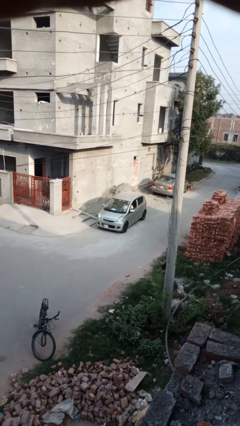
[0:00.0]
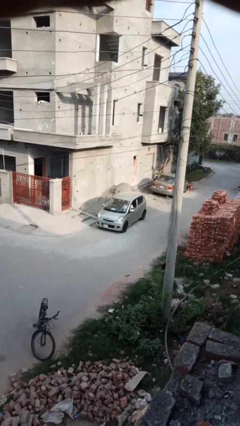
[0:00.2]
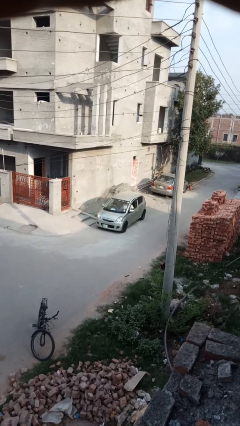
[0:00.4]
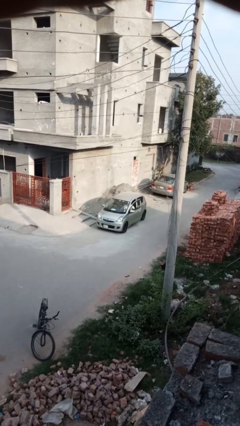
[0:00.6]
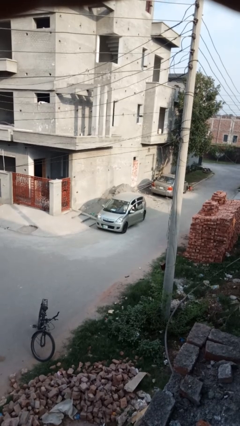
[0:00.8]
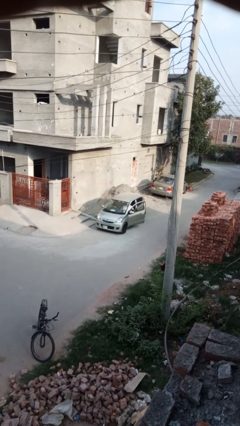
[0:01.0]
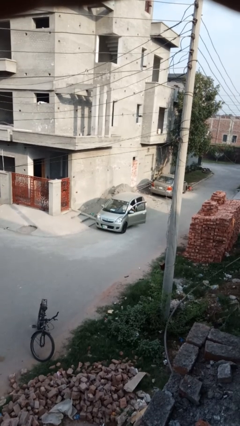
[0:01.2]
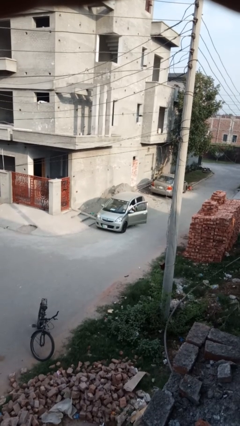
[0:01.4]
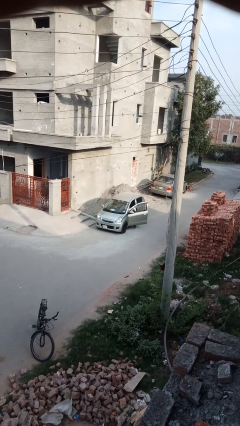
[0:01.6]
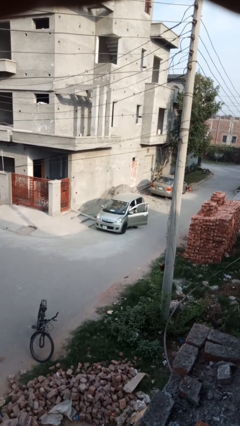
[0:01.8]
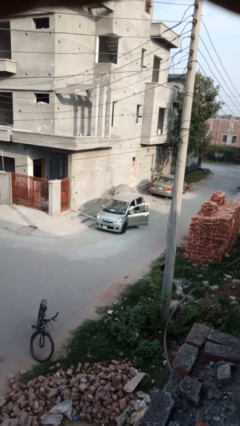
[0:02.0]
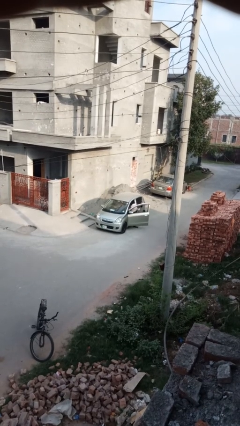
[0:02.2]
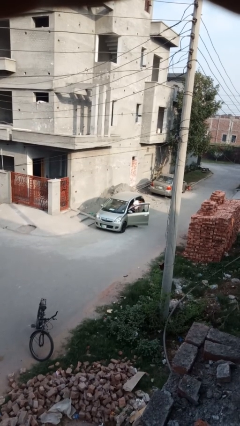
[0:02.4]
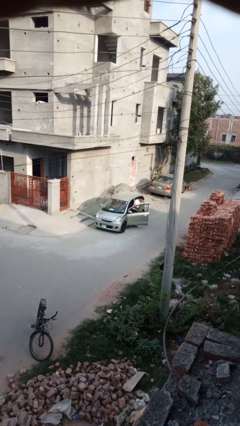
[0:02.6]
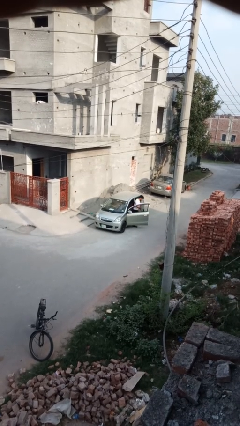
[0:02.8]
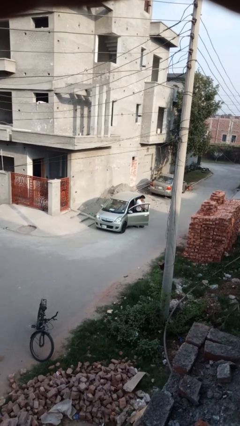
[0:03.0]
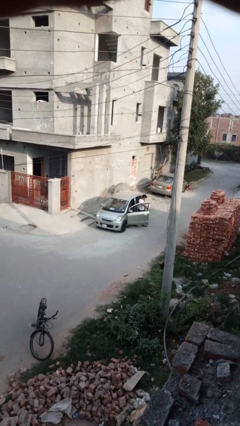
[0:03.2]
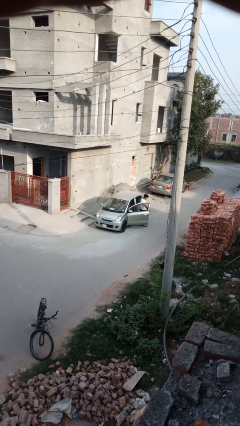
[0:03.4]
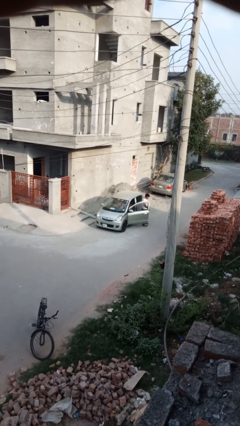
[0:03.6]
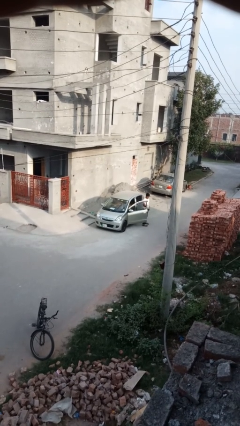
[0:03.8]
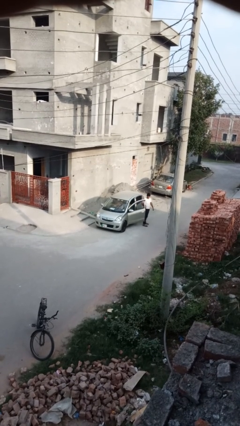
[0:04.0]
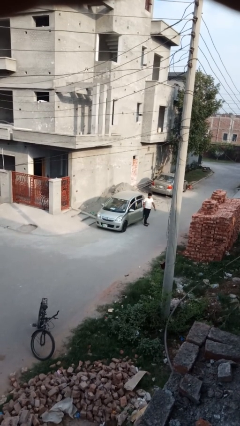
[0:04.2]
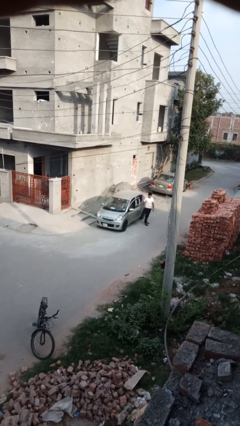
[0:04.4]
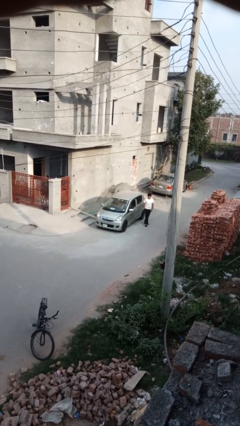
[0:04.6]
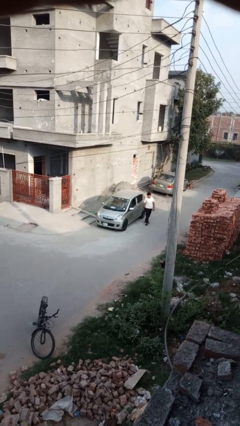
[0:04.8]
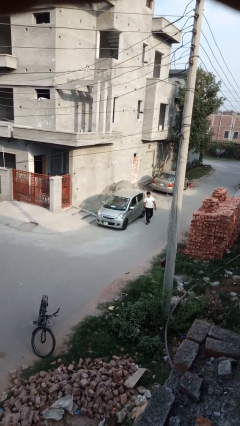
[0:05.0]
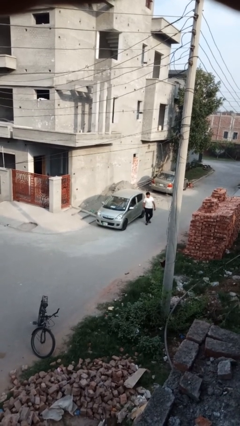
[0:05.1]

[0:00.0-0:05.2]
car drops off person

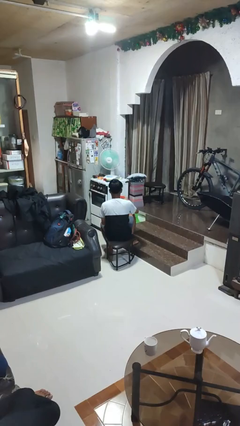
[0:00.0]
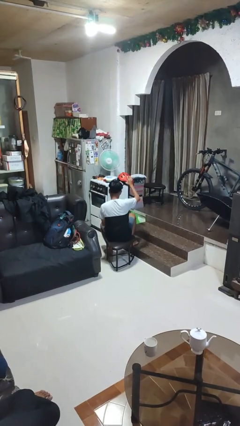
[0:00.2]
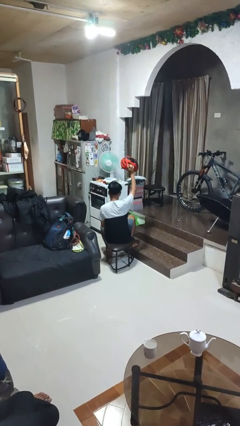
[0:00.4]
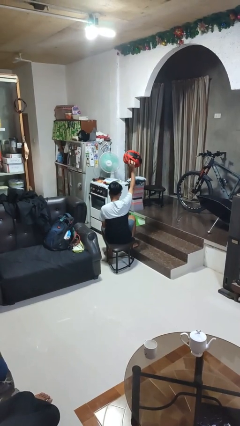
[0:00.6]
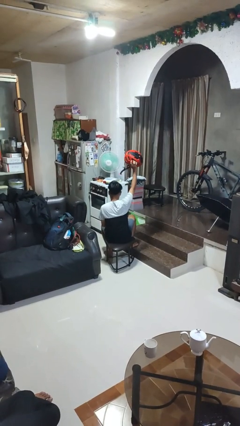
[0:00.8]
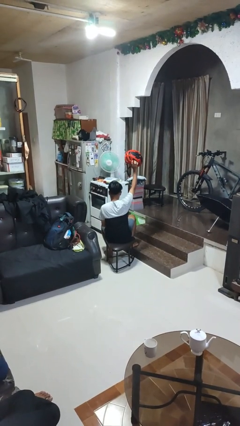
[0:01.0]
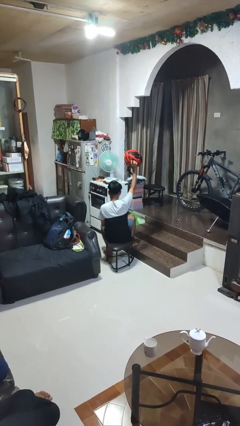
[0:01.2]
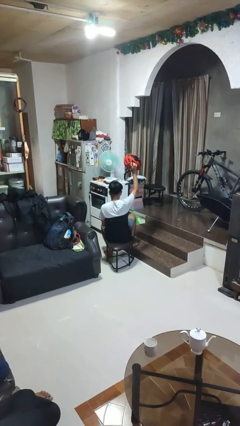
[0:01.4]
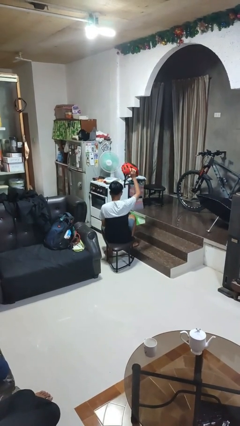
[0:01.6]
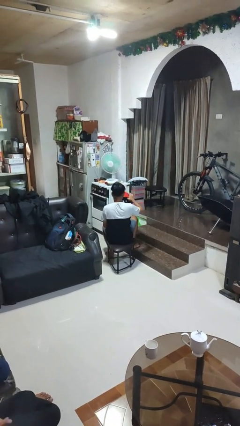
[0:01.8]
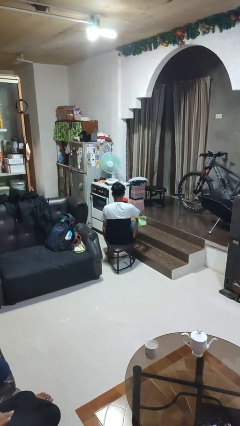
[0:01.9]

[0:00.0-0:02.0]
person holds object above head

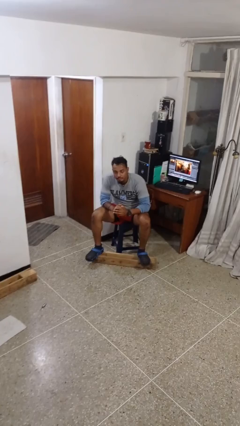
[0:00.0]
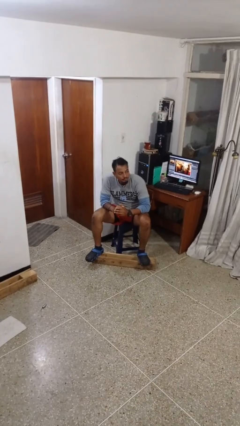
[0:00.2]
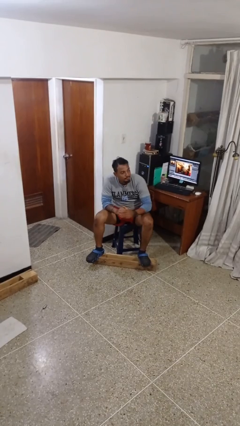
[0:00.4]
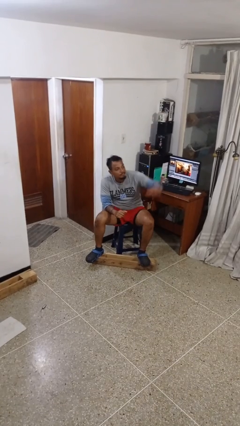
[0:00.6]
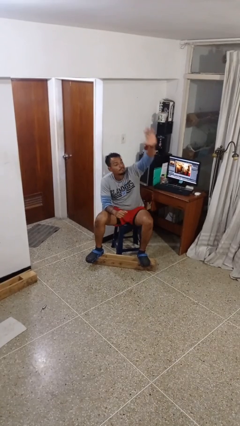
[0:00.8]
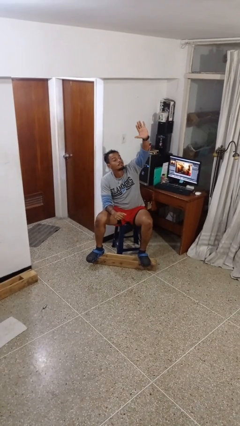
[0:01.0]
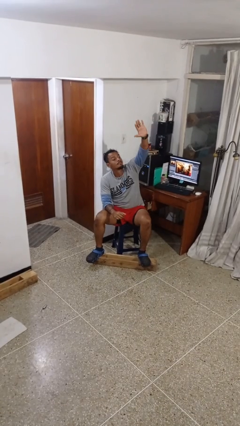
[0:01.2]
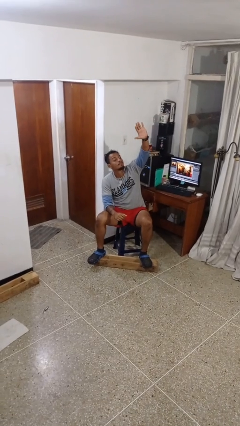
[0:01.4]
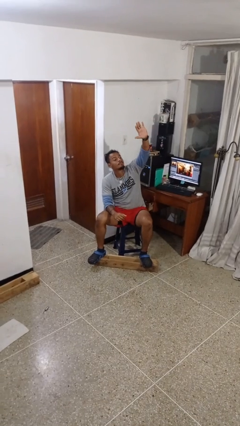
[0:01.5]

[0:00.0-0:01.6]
person gestures raise hand

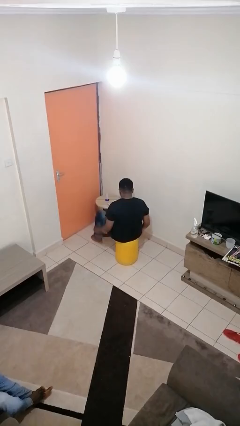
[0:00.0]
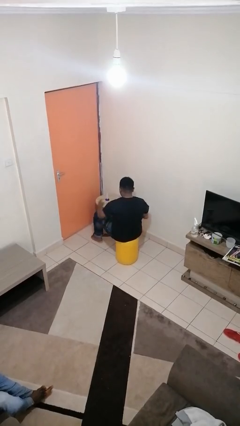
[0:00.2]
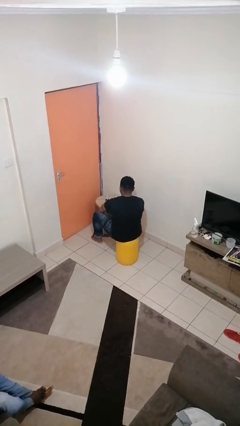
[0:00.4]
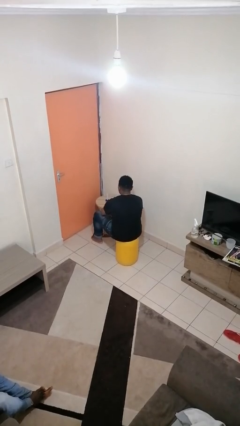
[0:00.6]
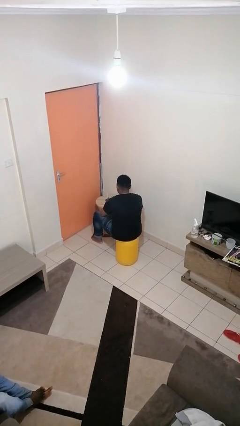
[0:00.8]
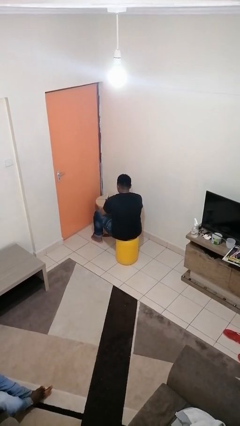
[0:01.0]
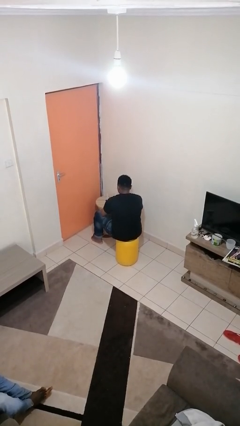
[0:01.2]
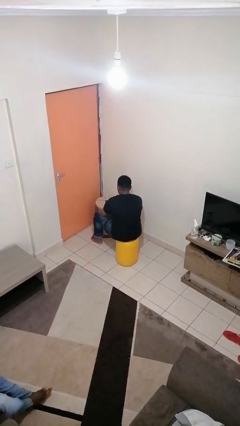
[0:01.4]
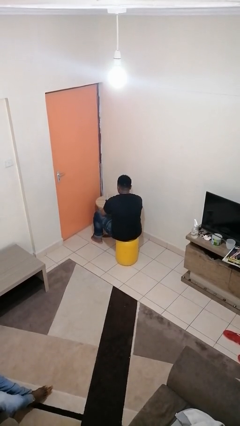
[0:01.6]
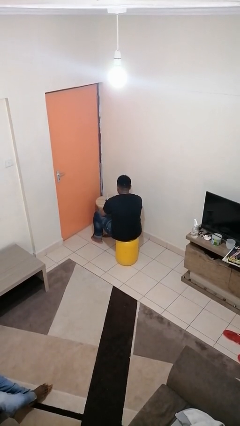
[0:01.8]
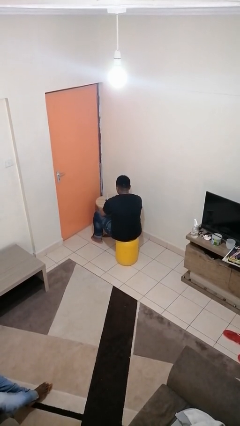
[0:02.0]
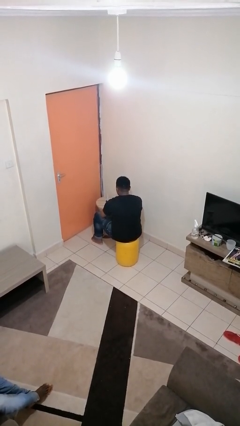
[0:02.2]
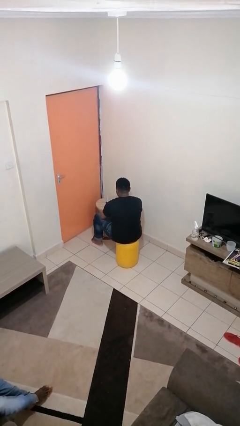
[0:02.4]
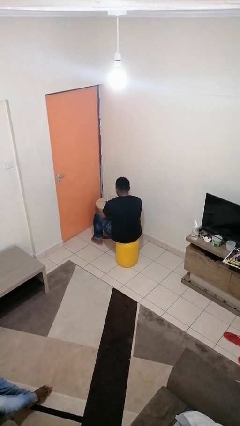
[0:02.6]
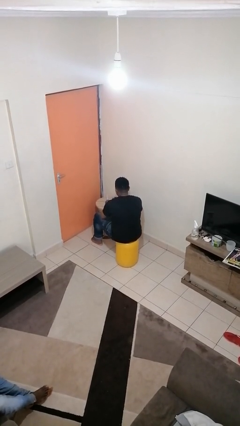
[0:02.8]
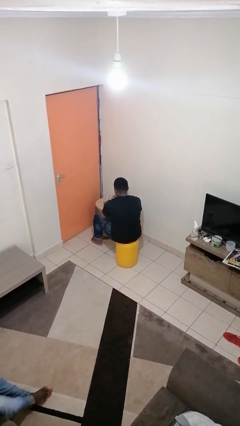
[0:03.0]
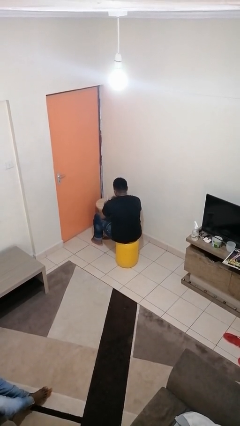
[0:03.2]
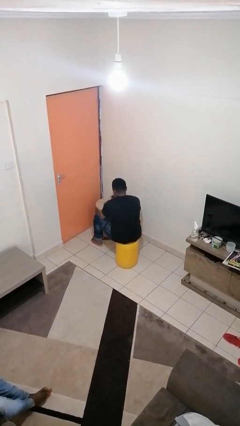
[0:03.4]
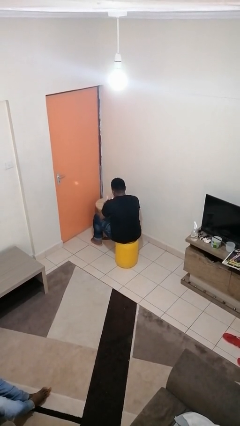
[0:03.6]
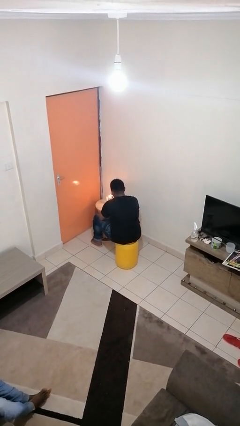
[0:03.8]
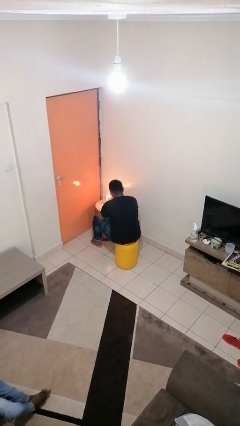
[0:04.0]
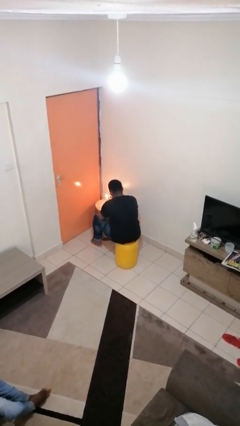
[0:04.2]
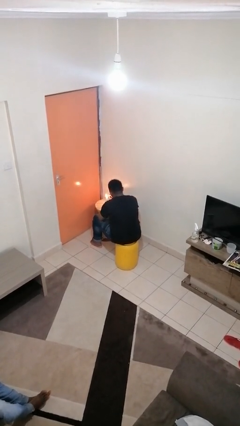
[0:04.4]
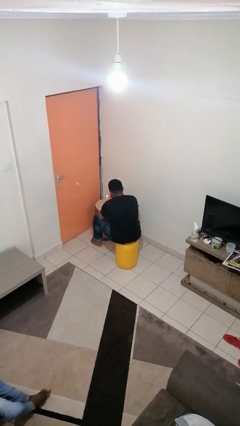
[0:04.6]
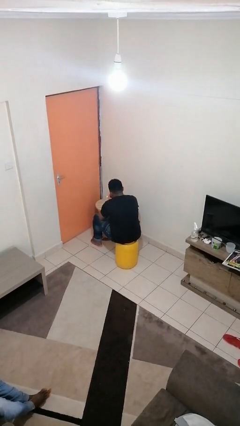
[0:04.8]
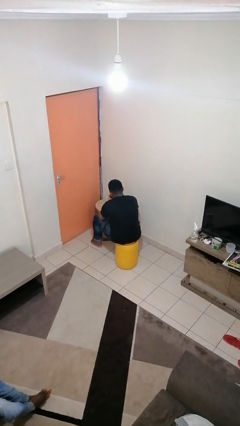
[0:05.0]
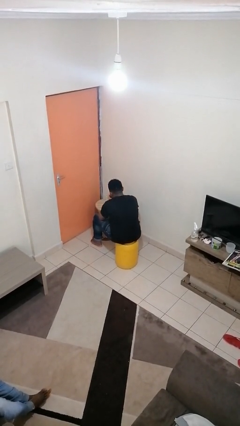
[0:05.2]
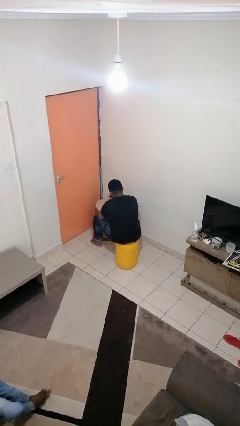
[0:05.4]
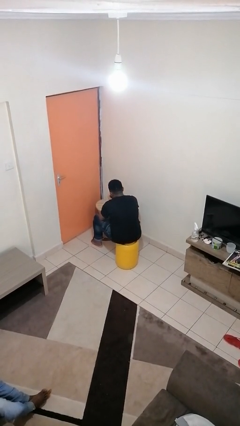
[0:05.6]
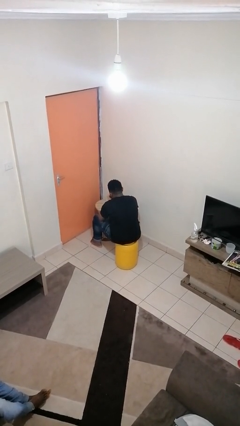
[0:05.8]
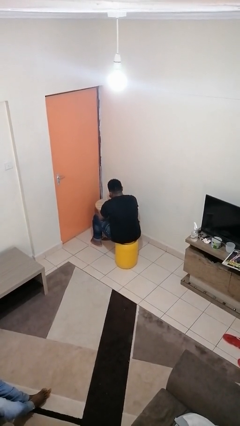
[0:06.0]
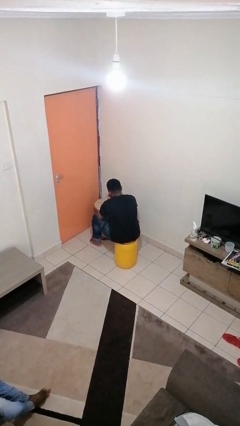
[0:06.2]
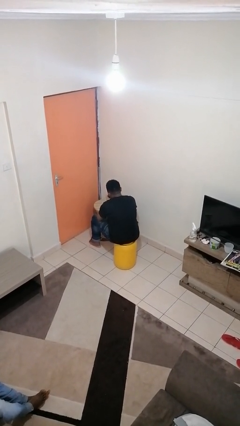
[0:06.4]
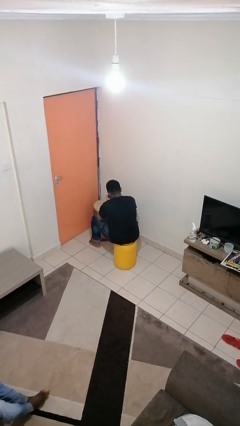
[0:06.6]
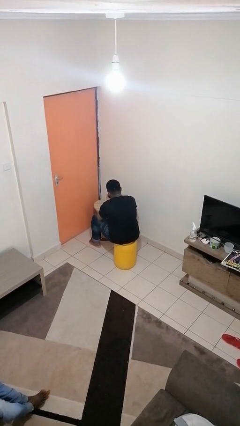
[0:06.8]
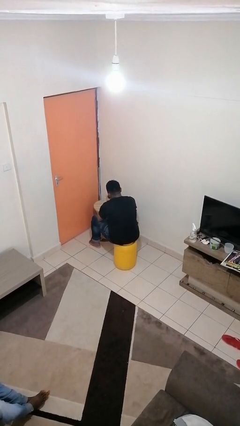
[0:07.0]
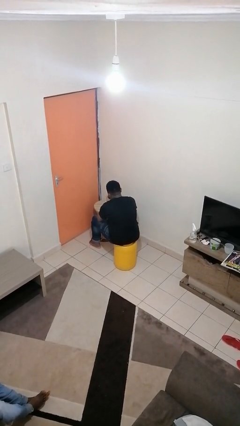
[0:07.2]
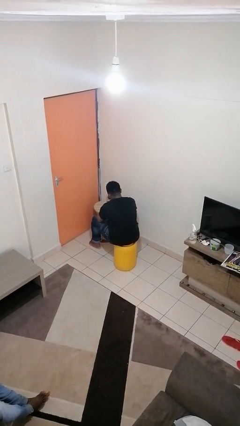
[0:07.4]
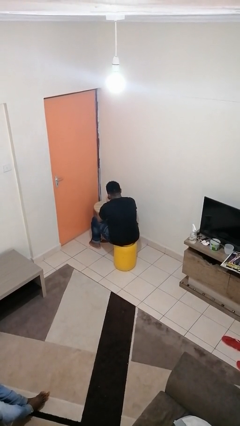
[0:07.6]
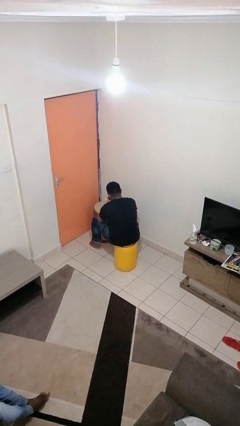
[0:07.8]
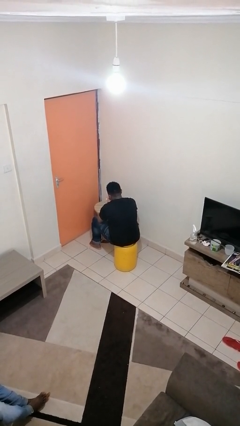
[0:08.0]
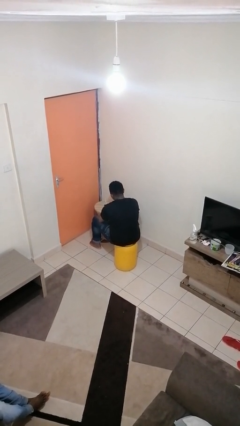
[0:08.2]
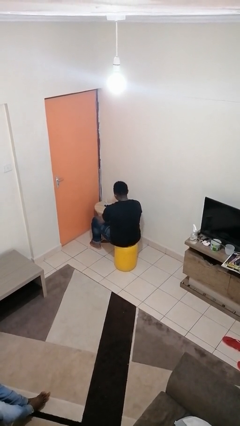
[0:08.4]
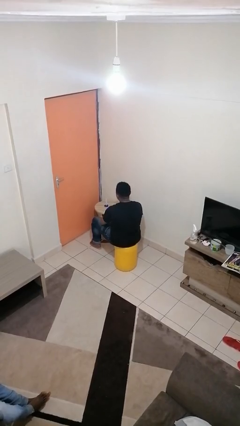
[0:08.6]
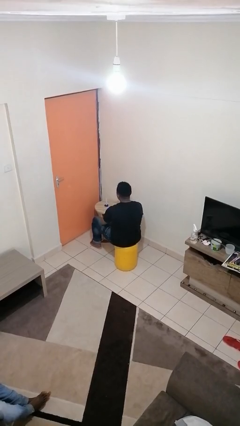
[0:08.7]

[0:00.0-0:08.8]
person lights candle

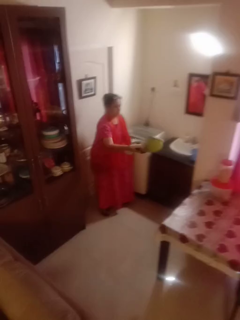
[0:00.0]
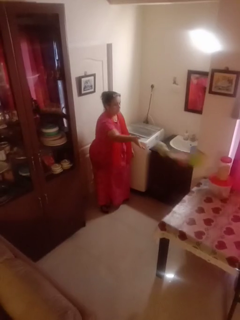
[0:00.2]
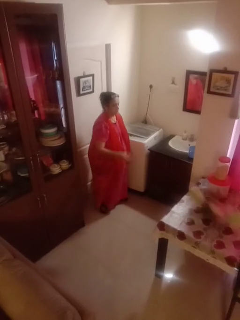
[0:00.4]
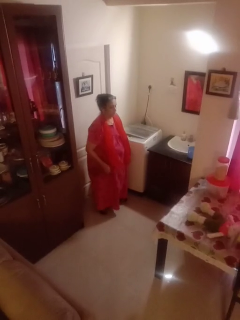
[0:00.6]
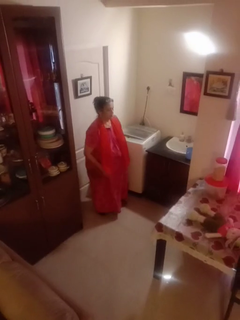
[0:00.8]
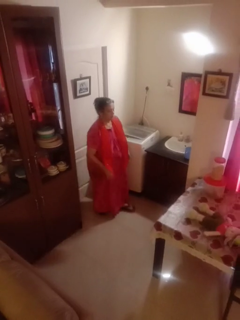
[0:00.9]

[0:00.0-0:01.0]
person throws object on table
